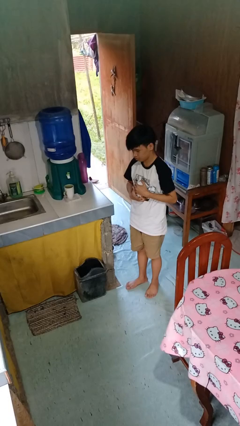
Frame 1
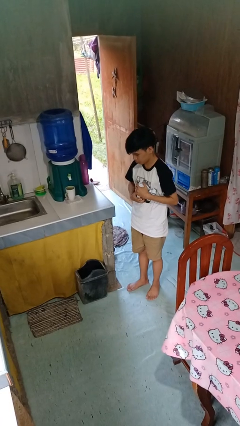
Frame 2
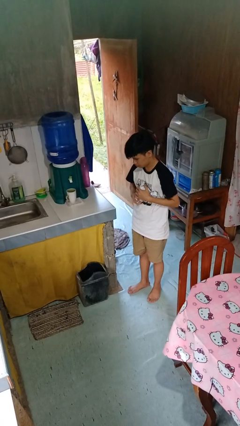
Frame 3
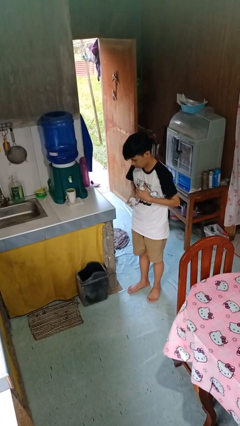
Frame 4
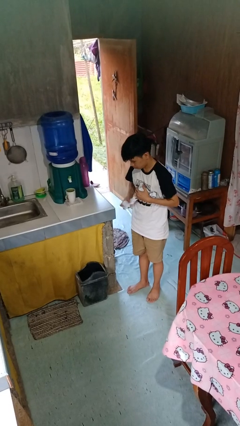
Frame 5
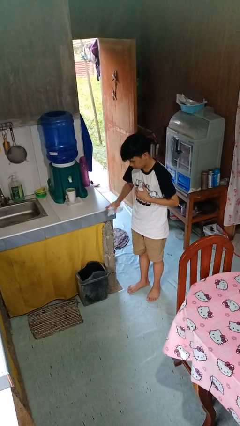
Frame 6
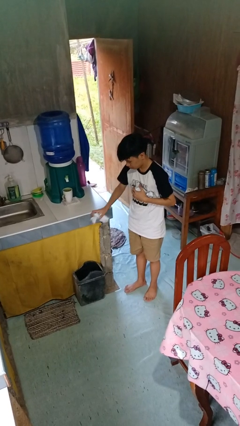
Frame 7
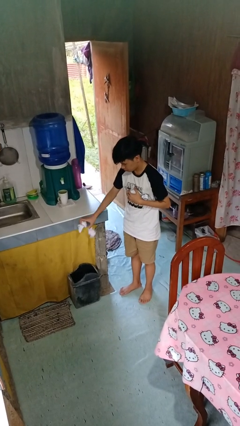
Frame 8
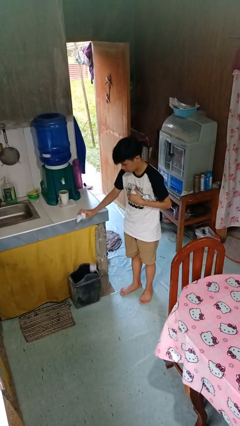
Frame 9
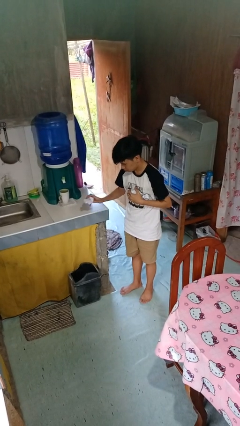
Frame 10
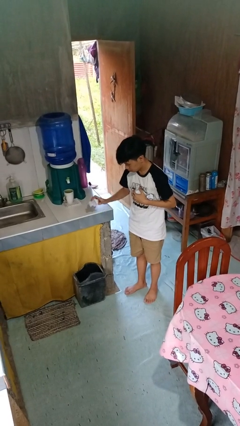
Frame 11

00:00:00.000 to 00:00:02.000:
person discards trash

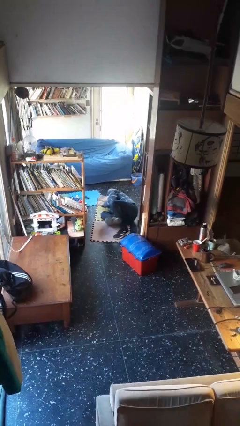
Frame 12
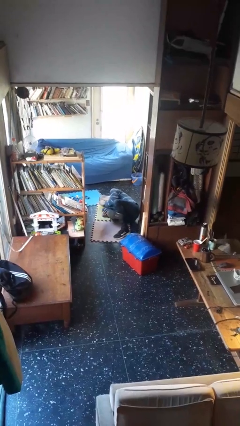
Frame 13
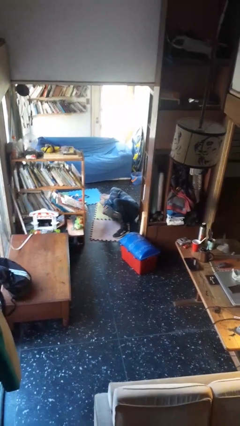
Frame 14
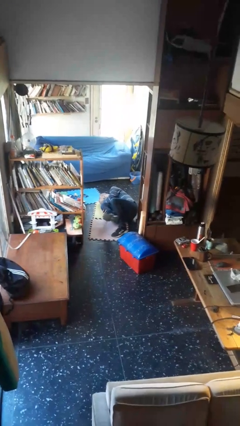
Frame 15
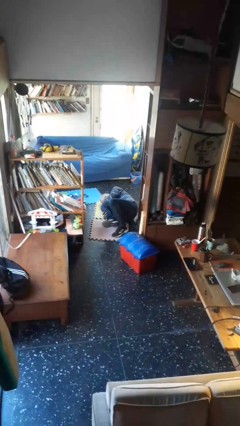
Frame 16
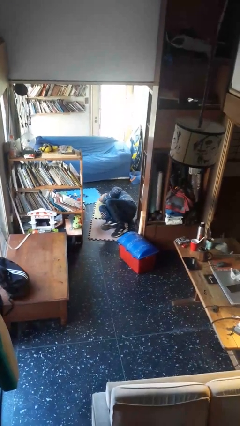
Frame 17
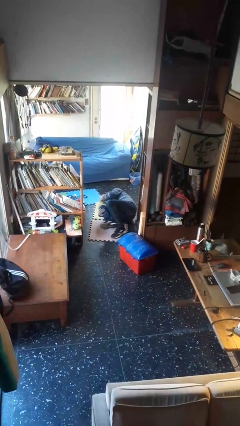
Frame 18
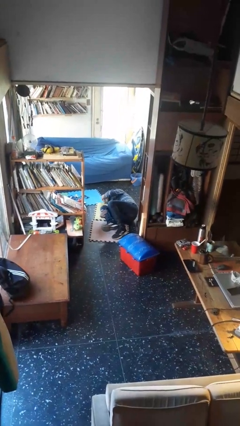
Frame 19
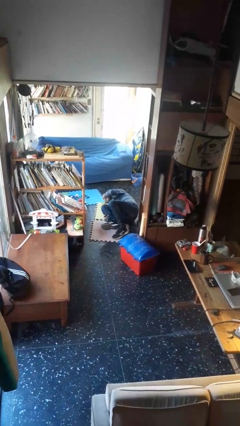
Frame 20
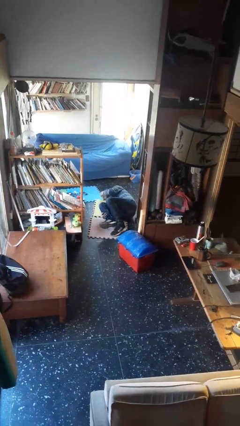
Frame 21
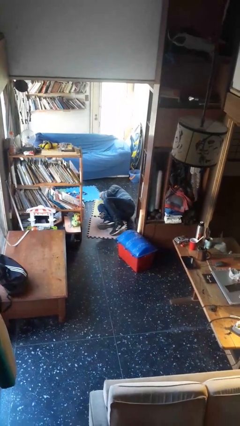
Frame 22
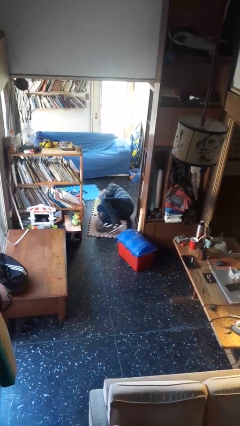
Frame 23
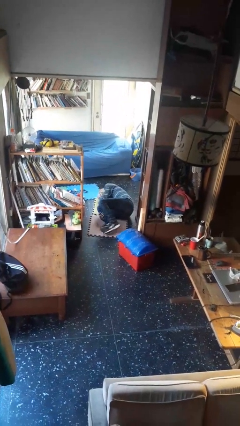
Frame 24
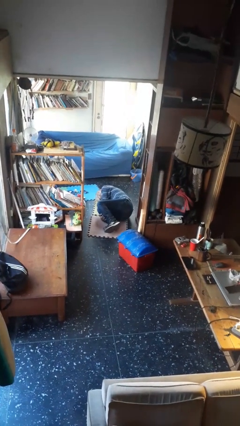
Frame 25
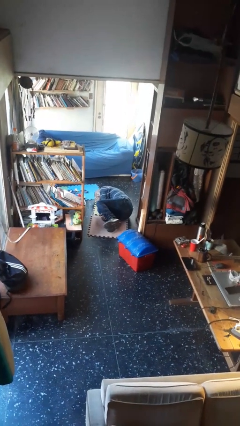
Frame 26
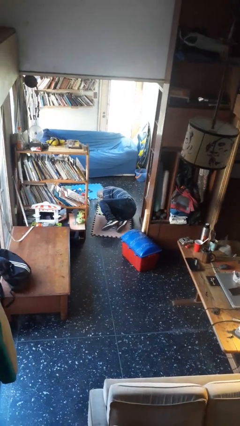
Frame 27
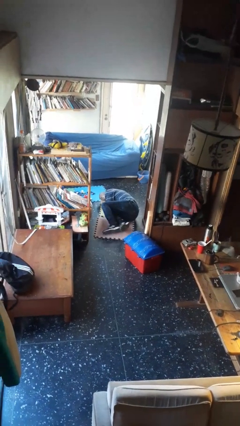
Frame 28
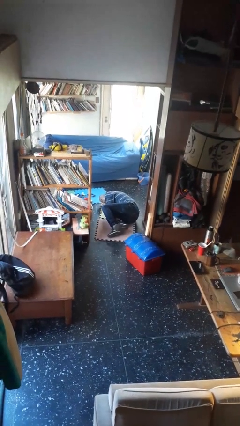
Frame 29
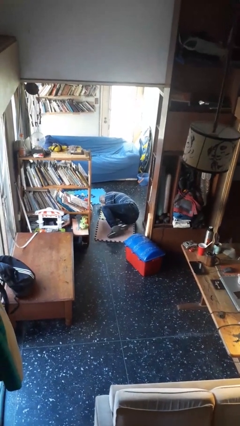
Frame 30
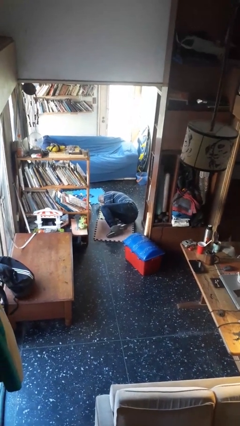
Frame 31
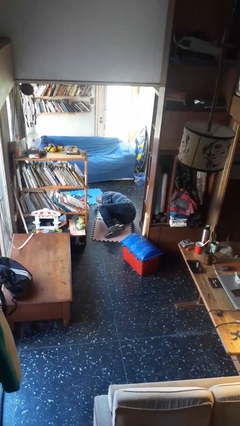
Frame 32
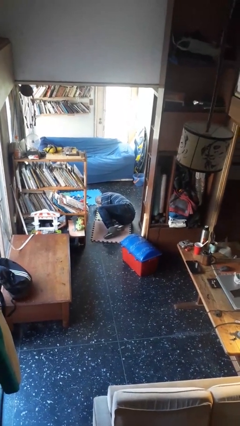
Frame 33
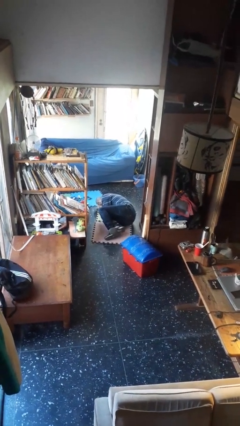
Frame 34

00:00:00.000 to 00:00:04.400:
person lies down on floor

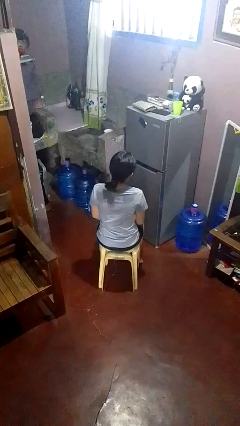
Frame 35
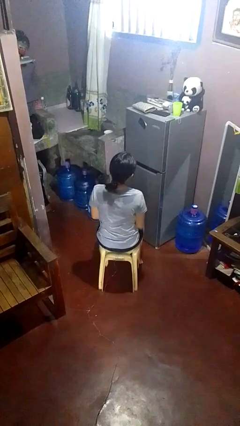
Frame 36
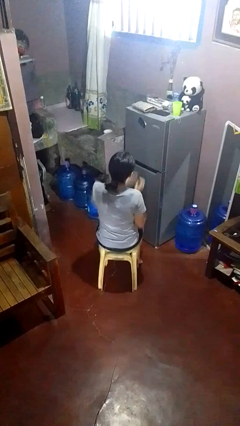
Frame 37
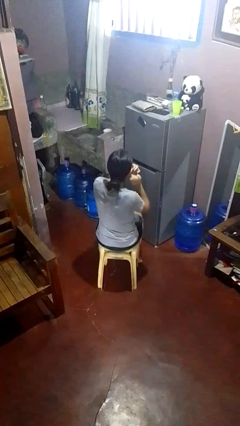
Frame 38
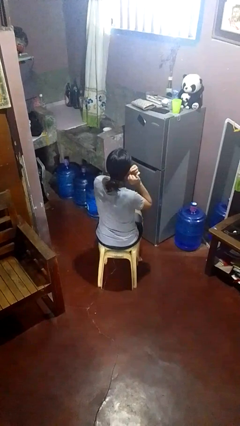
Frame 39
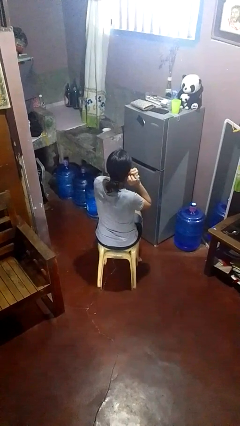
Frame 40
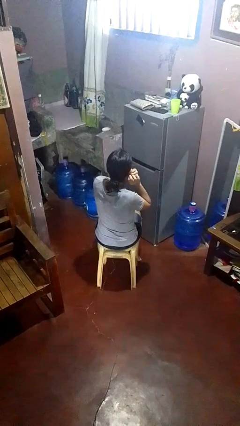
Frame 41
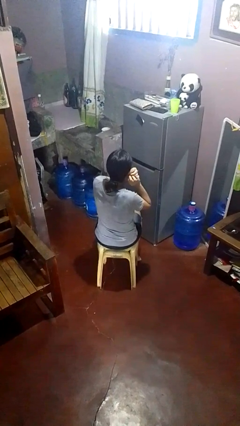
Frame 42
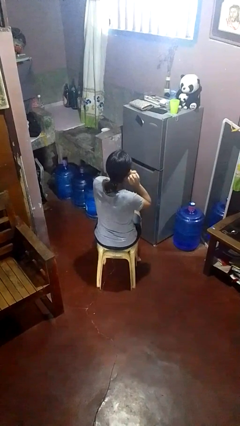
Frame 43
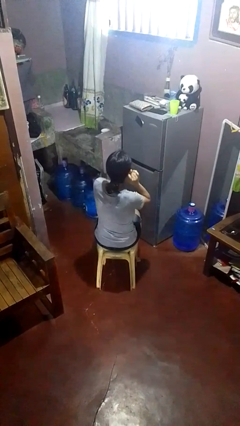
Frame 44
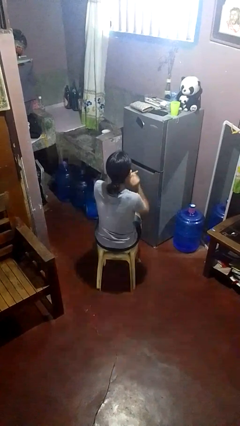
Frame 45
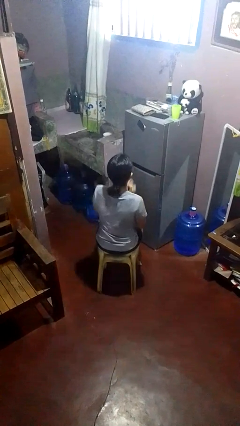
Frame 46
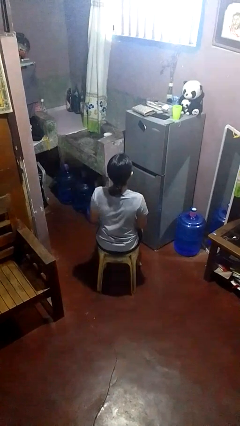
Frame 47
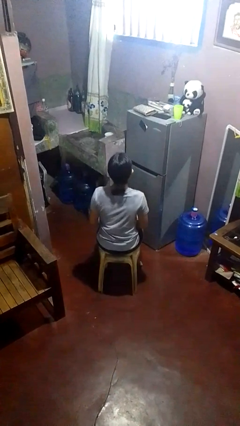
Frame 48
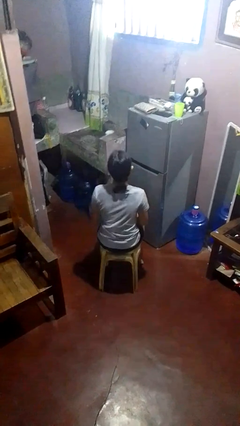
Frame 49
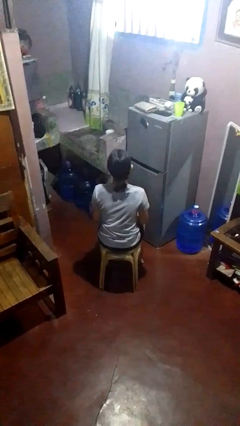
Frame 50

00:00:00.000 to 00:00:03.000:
person takes off earrings

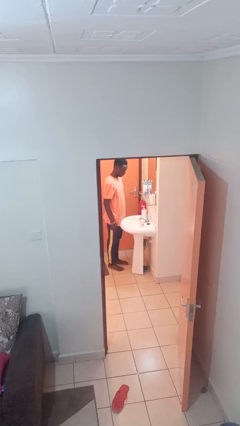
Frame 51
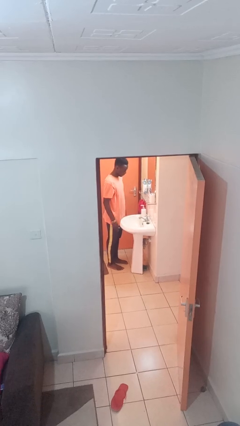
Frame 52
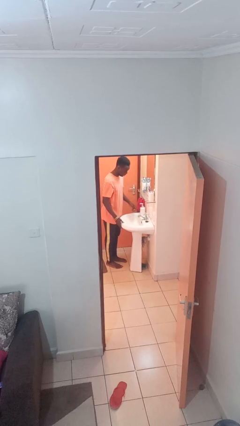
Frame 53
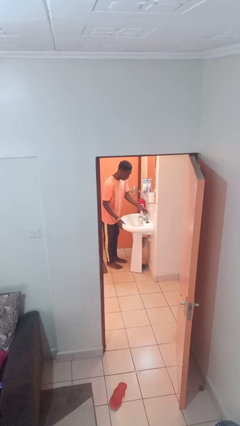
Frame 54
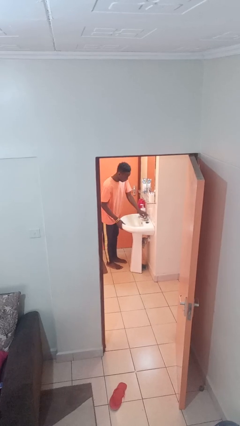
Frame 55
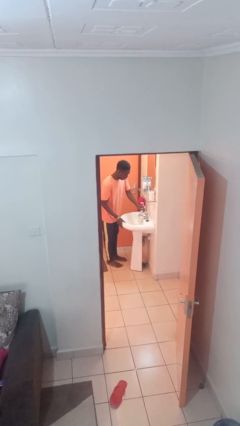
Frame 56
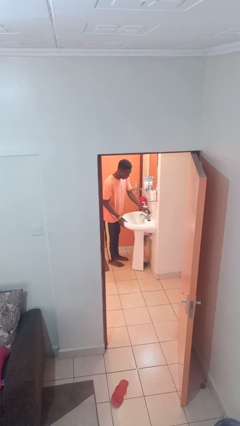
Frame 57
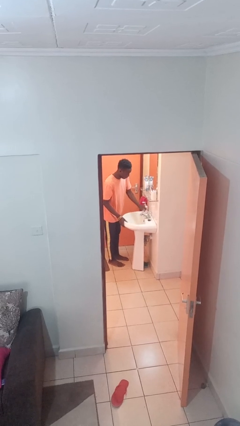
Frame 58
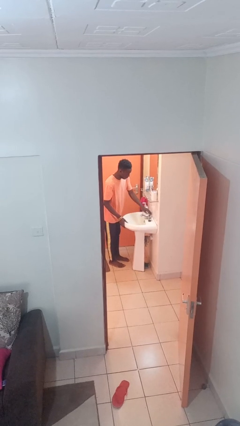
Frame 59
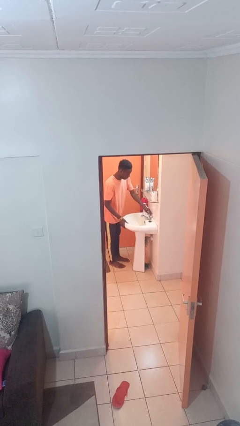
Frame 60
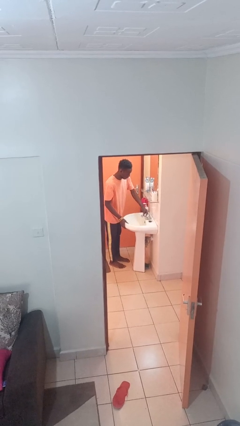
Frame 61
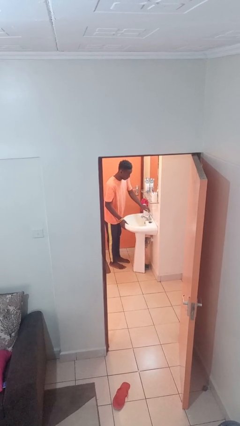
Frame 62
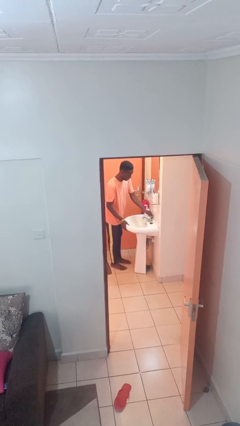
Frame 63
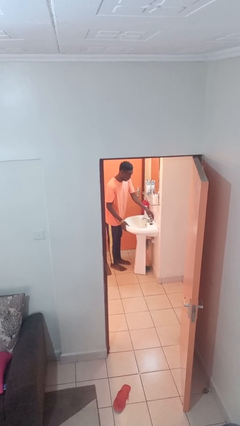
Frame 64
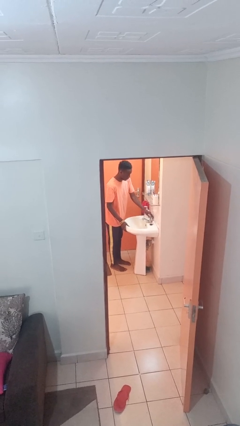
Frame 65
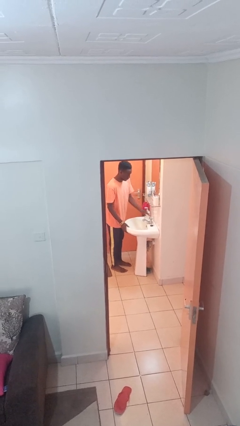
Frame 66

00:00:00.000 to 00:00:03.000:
person turns off faucet

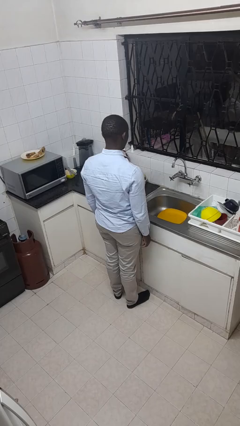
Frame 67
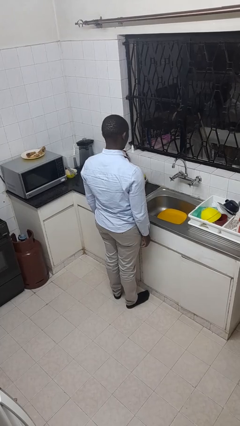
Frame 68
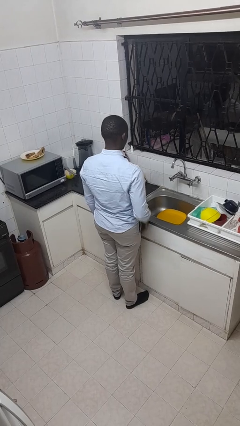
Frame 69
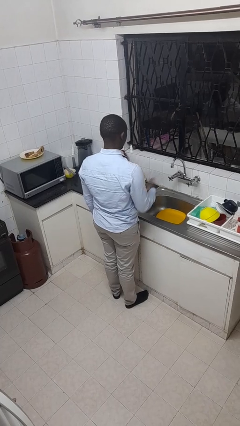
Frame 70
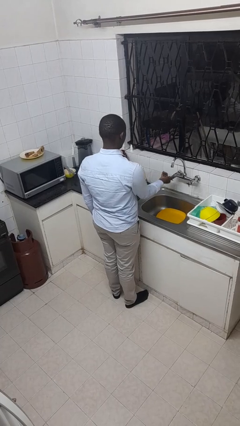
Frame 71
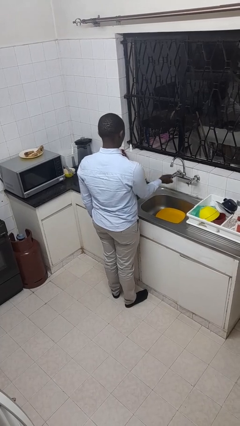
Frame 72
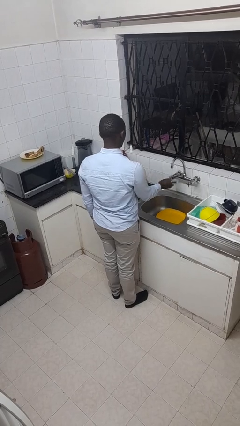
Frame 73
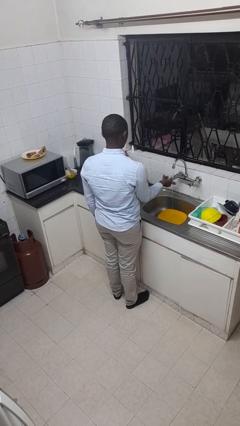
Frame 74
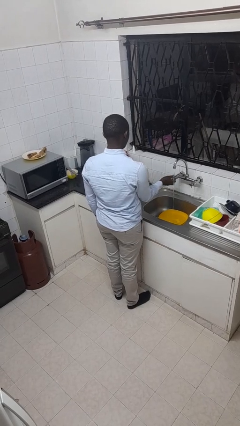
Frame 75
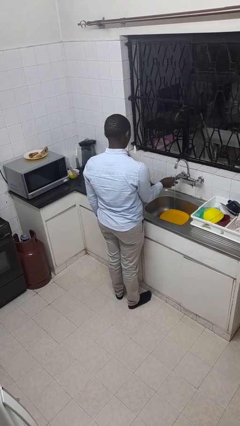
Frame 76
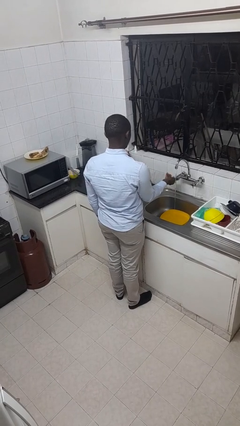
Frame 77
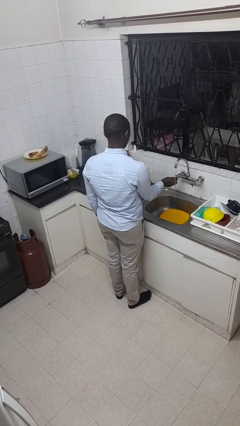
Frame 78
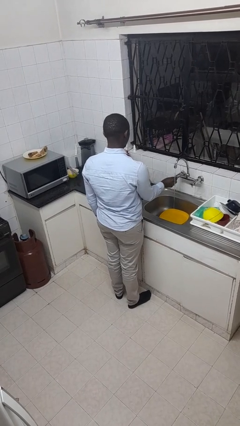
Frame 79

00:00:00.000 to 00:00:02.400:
person turns on faucet

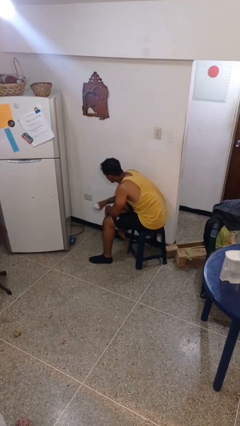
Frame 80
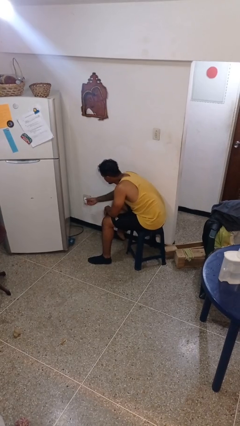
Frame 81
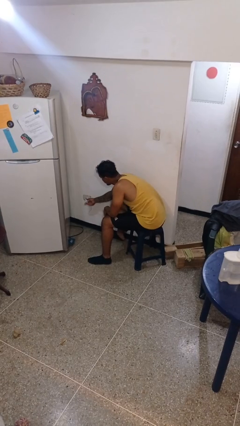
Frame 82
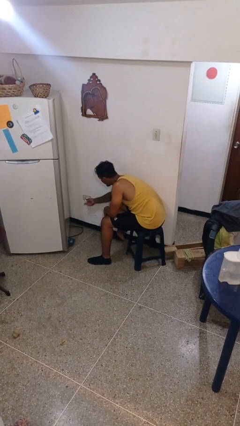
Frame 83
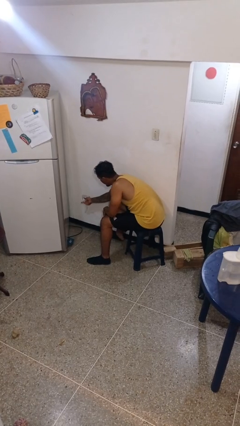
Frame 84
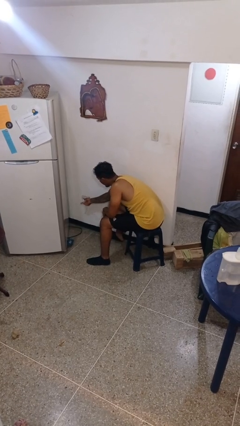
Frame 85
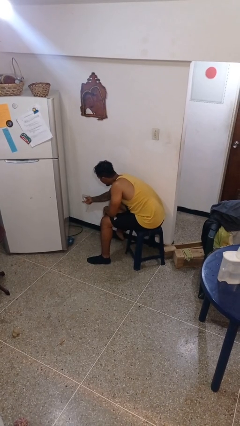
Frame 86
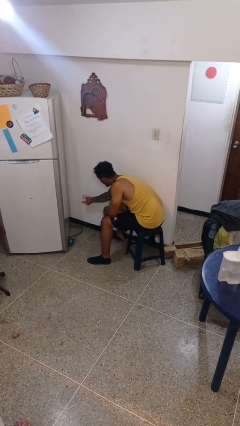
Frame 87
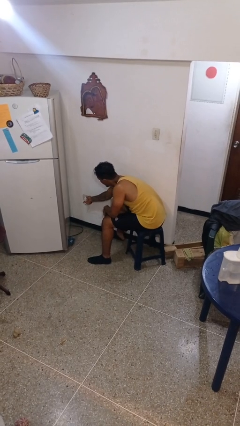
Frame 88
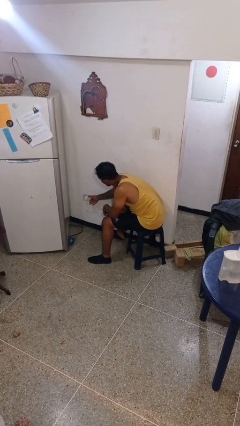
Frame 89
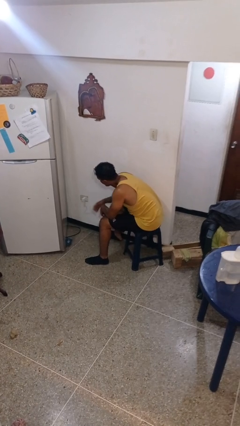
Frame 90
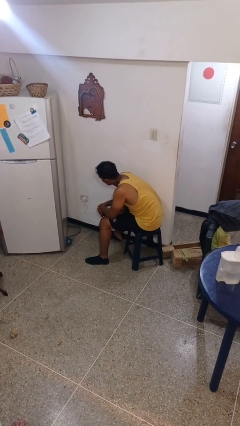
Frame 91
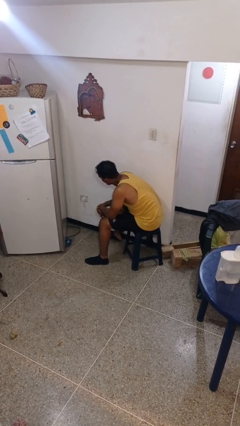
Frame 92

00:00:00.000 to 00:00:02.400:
person plugs into electrical socket

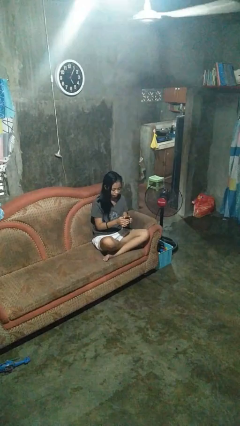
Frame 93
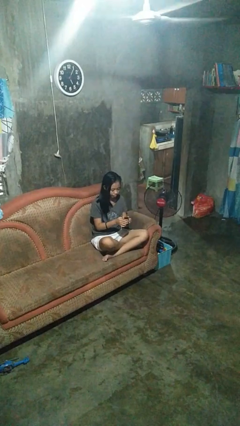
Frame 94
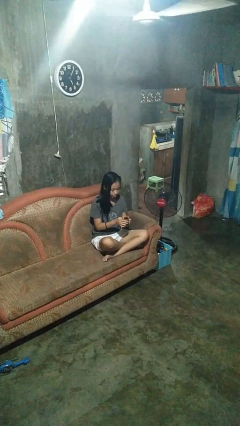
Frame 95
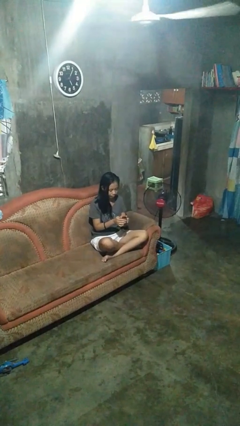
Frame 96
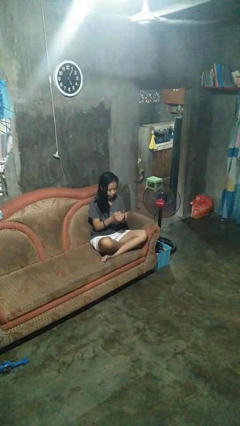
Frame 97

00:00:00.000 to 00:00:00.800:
person drinks from mug
